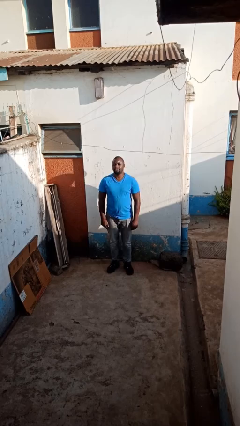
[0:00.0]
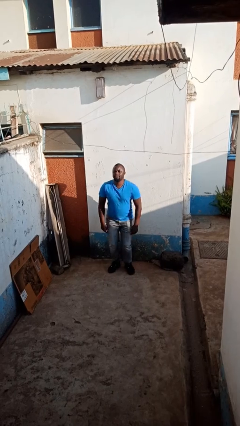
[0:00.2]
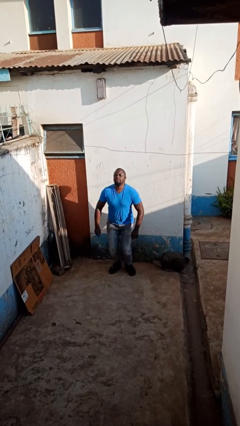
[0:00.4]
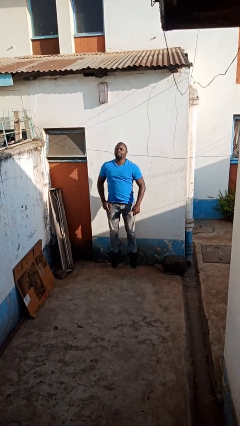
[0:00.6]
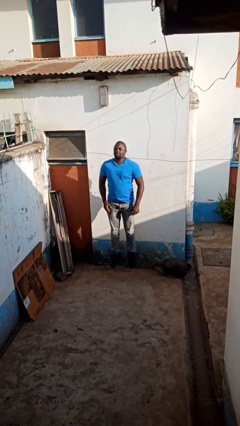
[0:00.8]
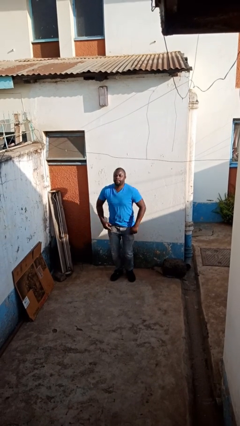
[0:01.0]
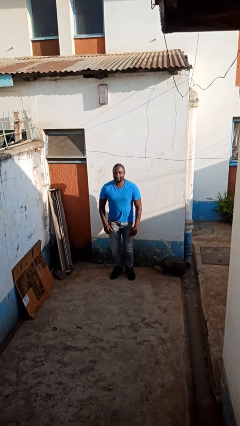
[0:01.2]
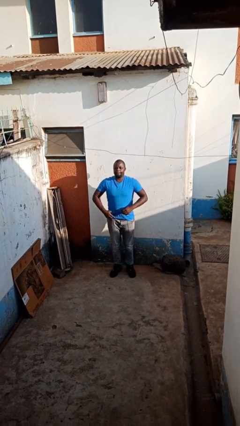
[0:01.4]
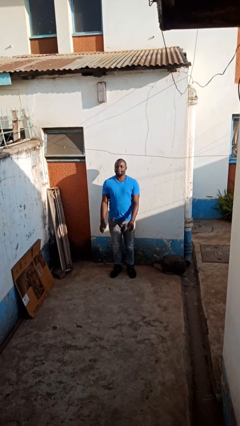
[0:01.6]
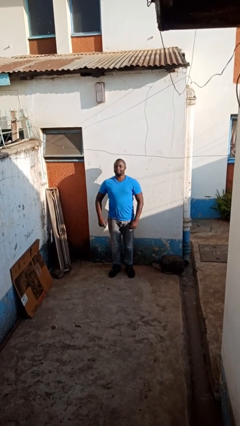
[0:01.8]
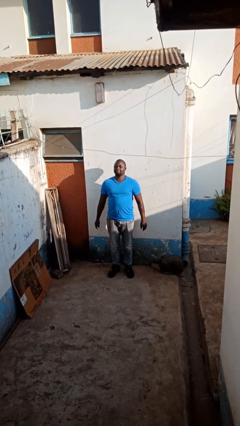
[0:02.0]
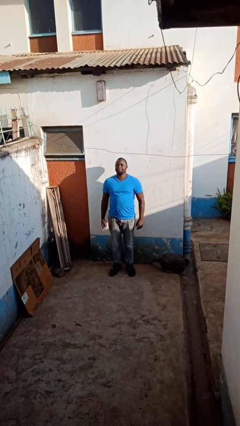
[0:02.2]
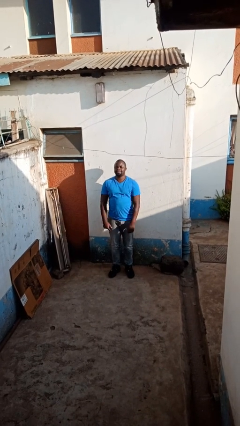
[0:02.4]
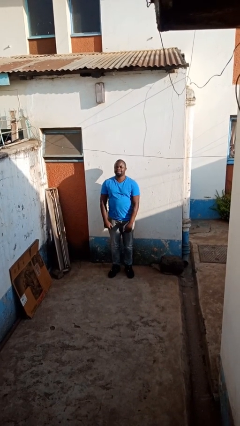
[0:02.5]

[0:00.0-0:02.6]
person jumps

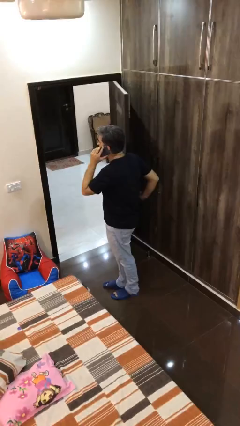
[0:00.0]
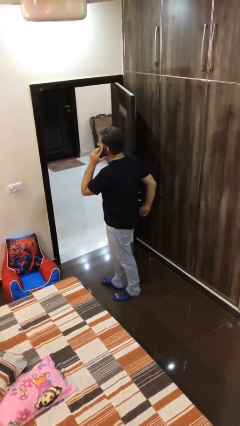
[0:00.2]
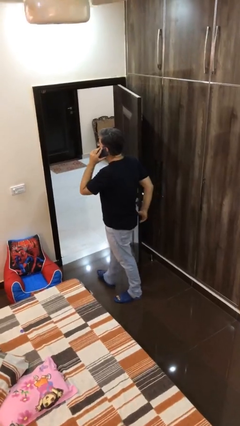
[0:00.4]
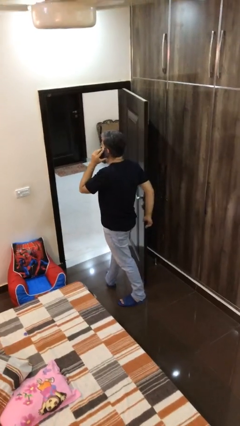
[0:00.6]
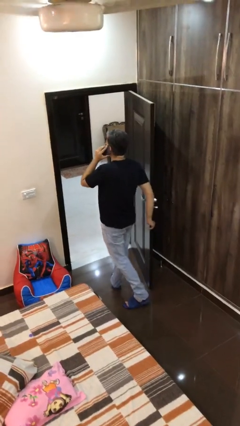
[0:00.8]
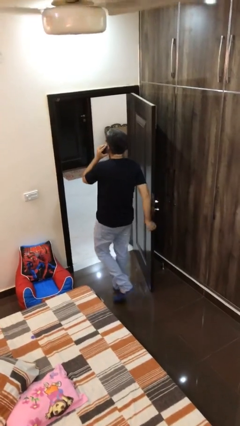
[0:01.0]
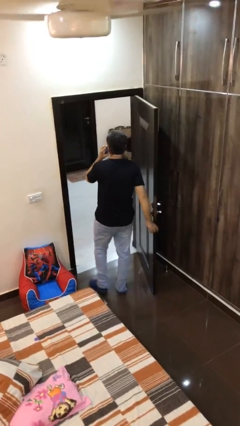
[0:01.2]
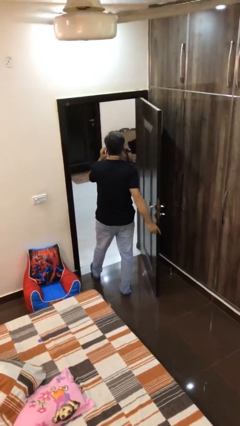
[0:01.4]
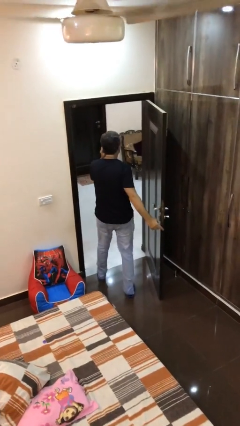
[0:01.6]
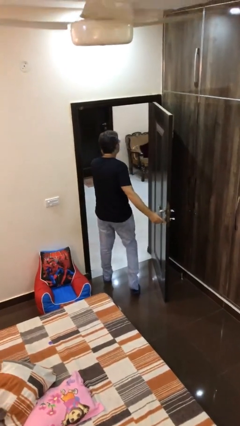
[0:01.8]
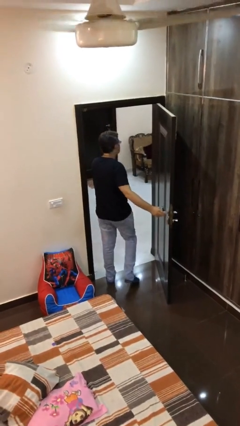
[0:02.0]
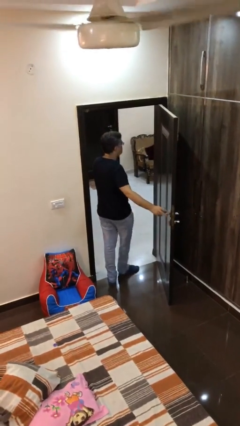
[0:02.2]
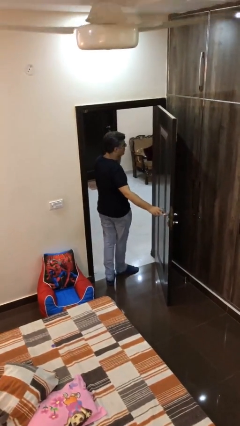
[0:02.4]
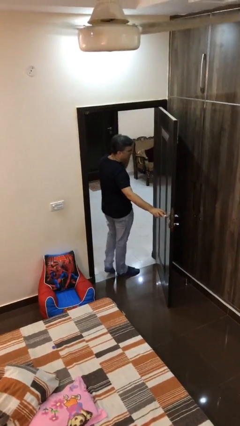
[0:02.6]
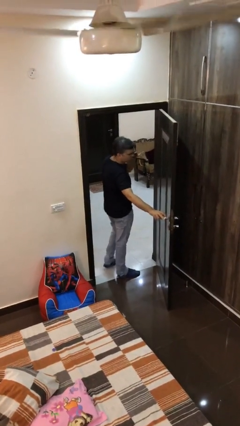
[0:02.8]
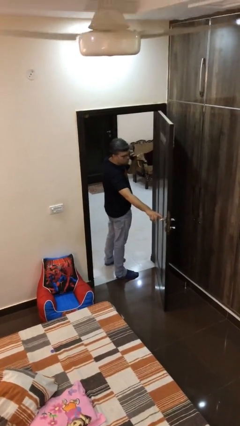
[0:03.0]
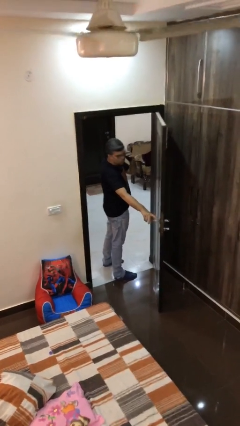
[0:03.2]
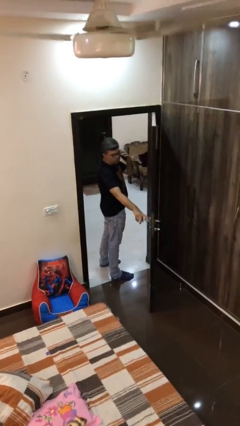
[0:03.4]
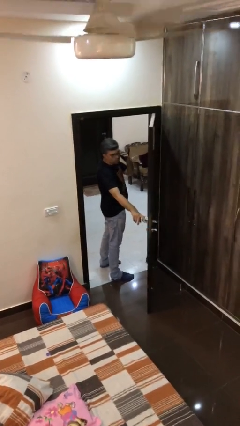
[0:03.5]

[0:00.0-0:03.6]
person exits scene through structure

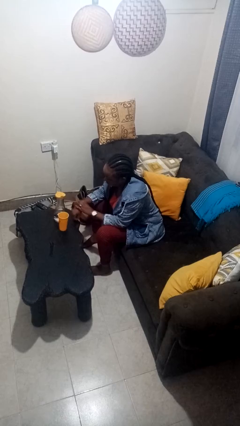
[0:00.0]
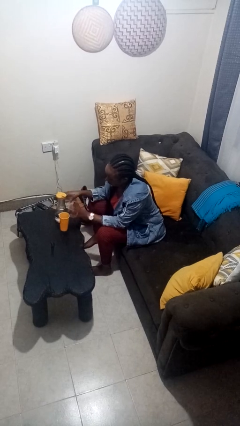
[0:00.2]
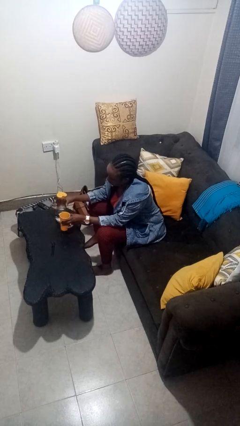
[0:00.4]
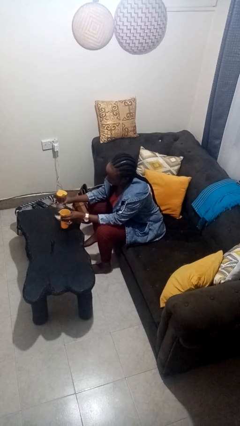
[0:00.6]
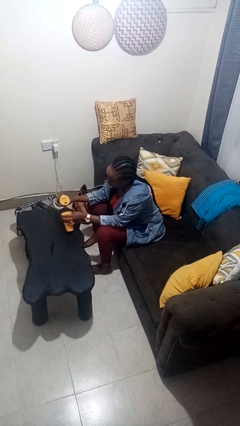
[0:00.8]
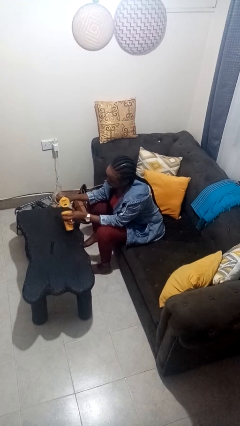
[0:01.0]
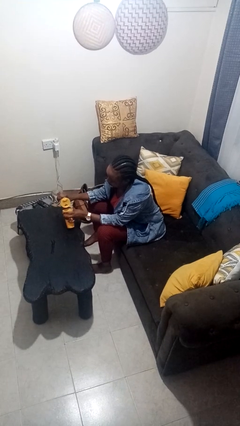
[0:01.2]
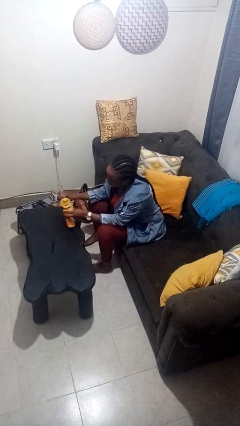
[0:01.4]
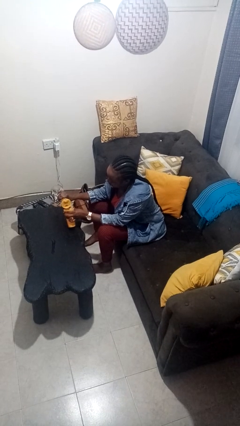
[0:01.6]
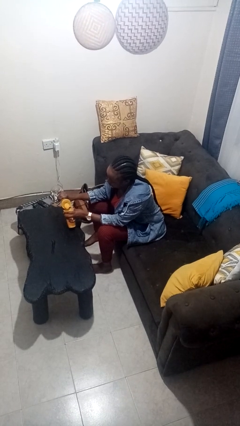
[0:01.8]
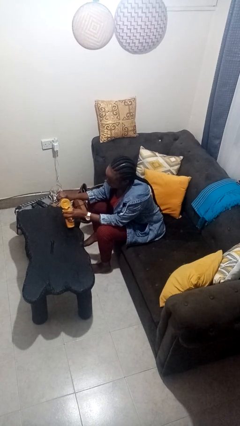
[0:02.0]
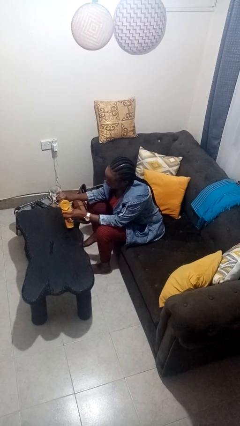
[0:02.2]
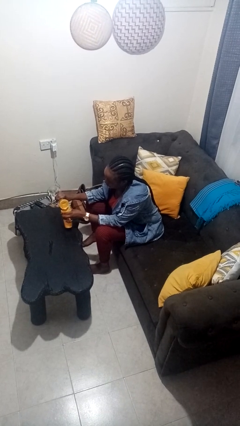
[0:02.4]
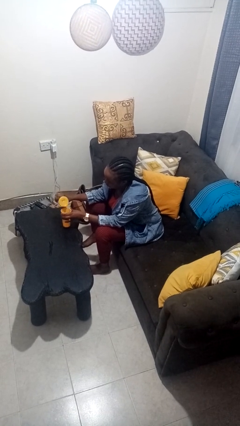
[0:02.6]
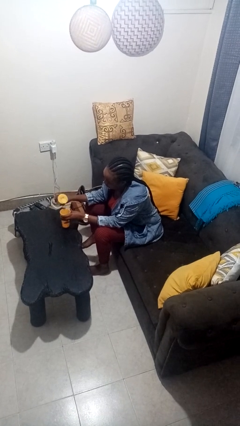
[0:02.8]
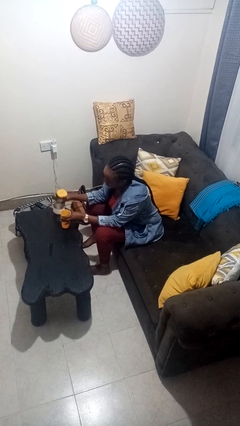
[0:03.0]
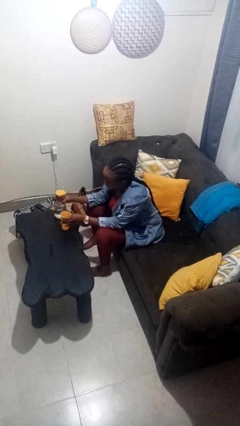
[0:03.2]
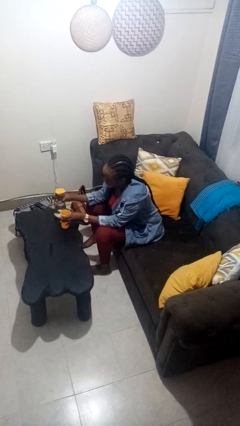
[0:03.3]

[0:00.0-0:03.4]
person pours liquid into cup

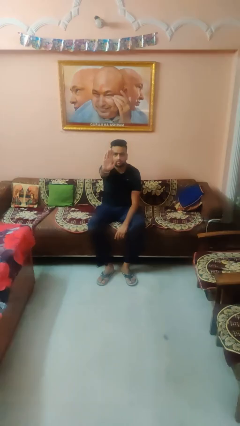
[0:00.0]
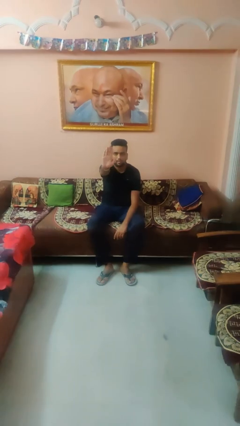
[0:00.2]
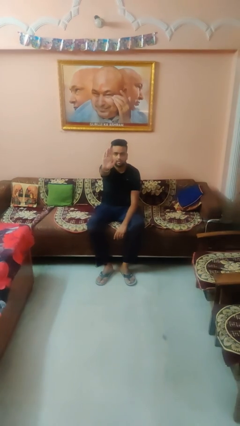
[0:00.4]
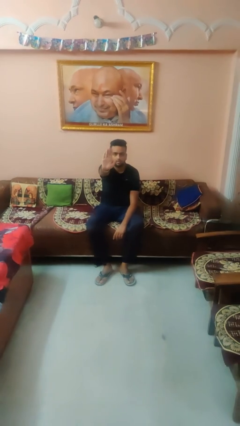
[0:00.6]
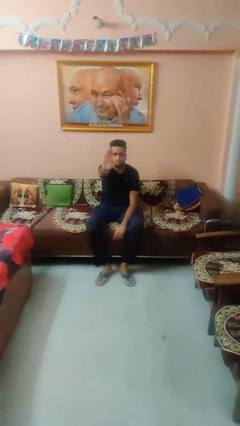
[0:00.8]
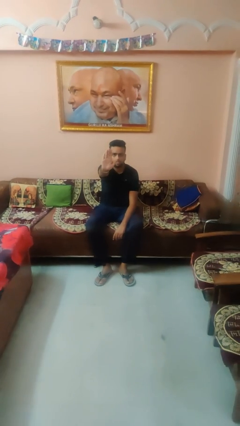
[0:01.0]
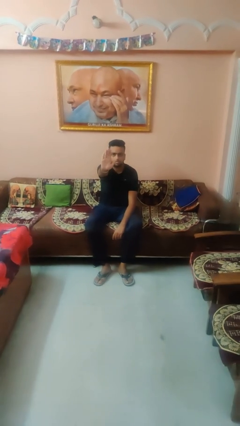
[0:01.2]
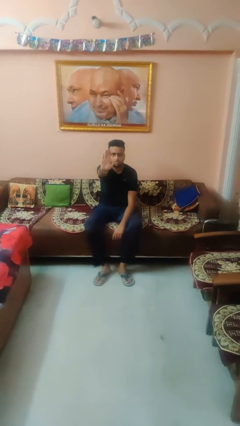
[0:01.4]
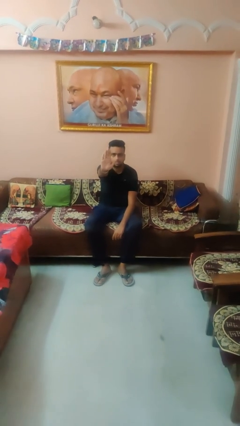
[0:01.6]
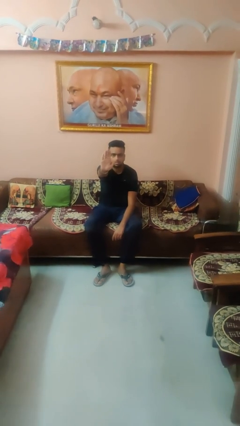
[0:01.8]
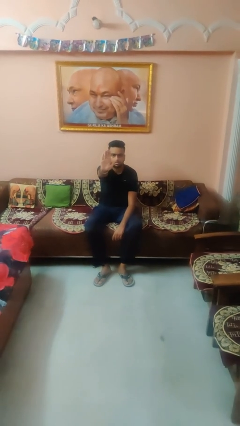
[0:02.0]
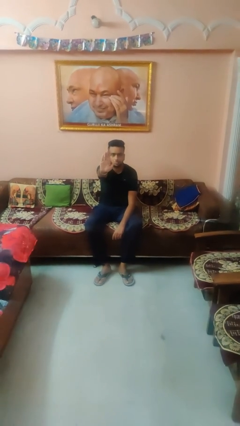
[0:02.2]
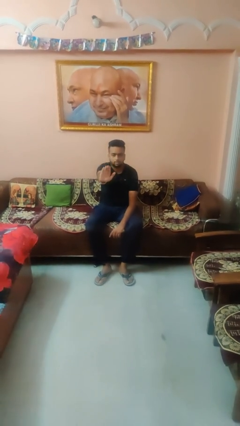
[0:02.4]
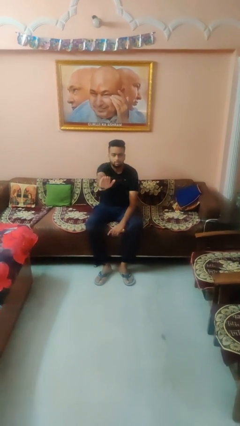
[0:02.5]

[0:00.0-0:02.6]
person gestures stop

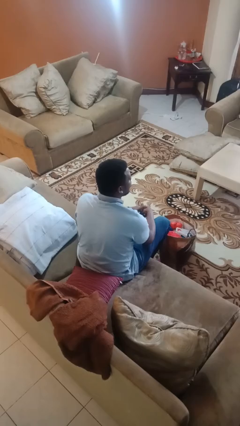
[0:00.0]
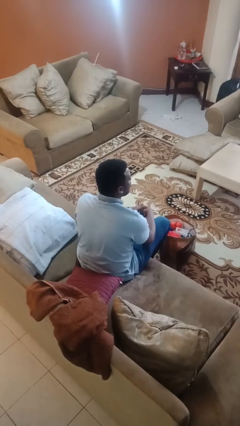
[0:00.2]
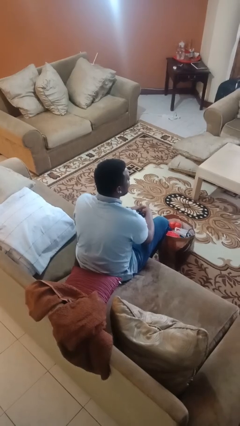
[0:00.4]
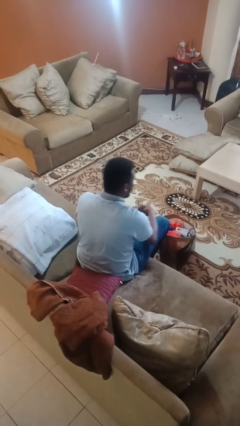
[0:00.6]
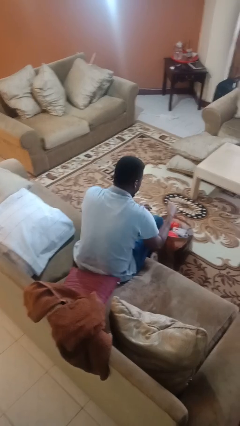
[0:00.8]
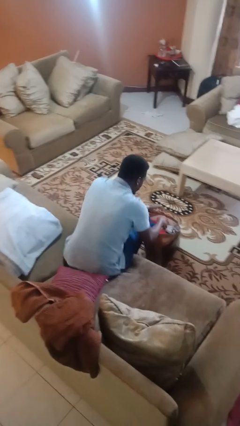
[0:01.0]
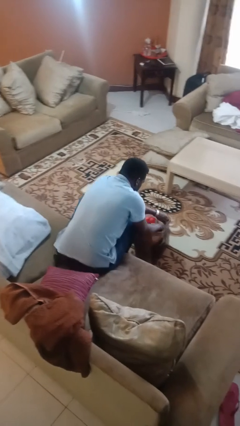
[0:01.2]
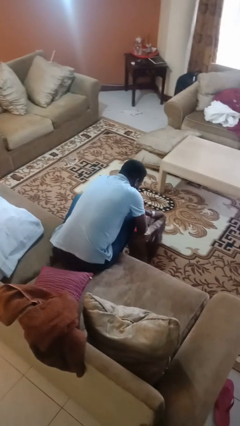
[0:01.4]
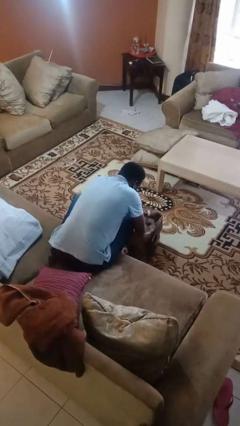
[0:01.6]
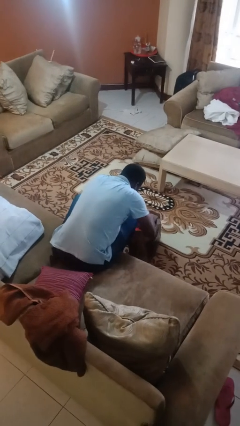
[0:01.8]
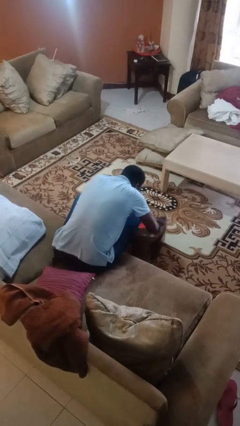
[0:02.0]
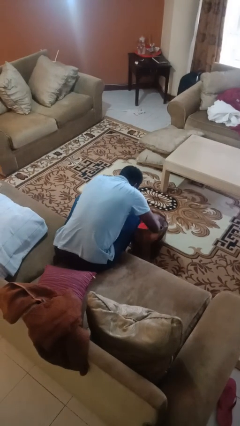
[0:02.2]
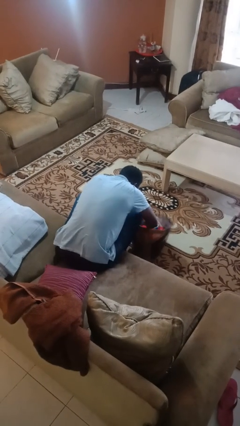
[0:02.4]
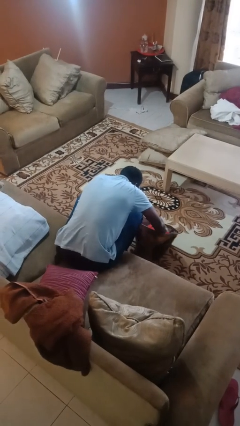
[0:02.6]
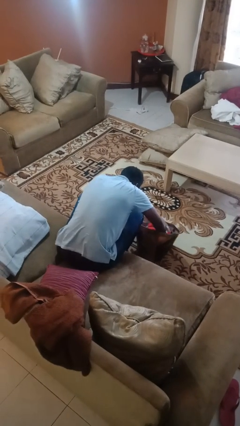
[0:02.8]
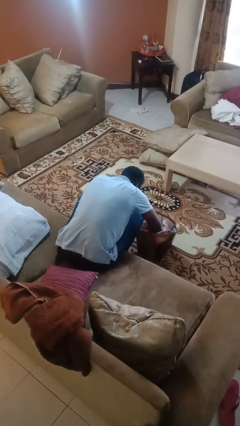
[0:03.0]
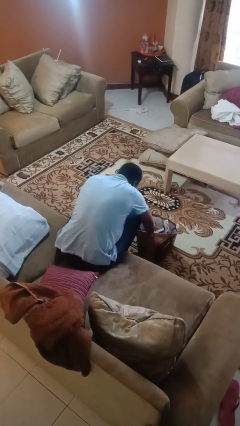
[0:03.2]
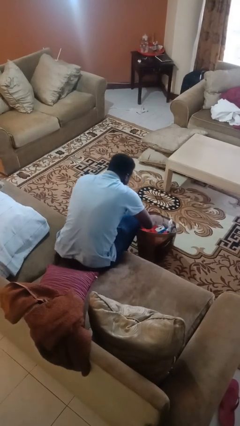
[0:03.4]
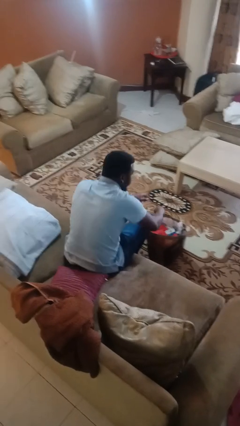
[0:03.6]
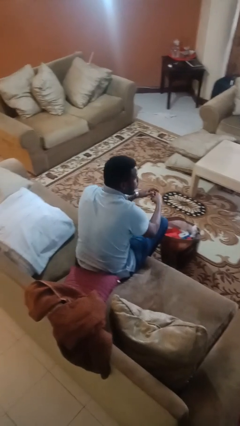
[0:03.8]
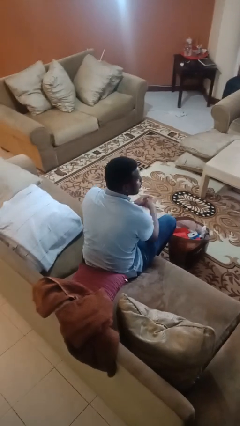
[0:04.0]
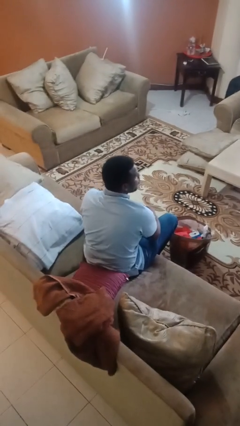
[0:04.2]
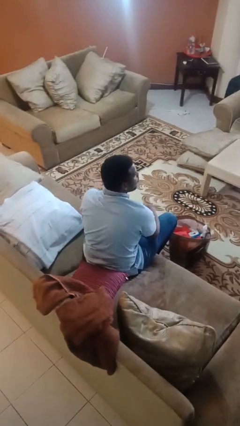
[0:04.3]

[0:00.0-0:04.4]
person searches in bag

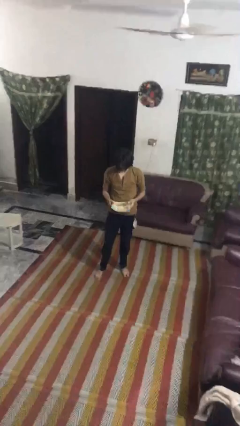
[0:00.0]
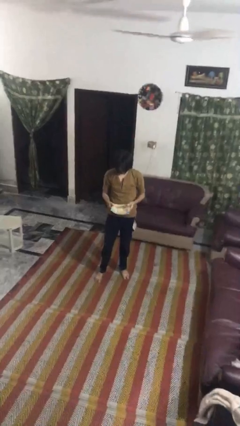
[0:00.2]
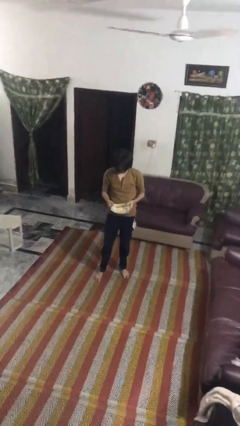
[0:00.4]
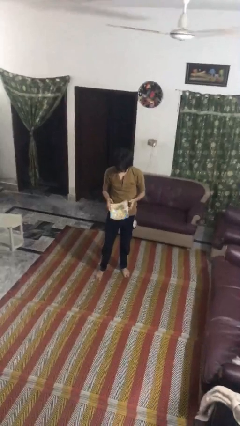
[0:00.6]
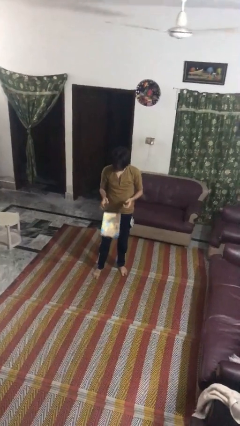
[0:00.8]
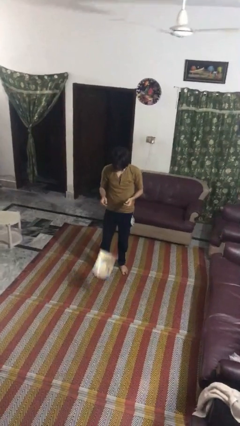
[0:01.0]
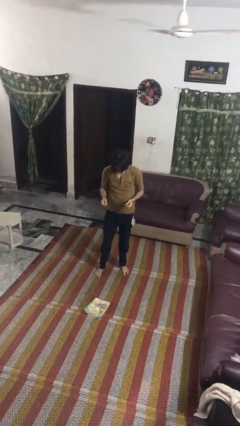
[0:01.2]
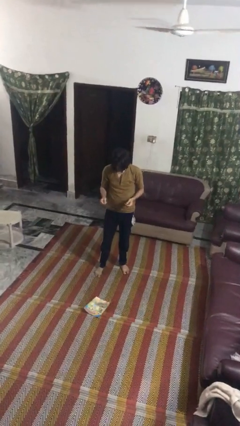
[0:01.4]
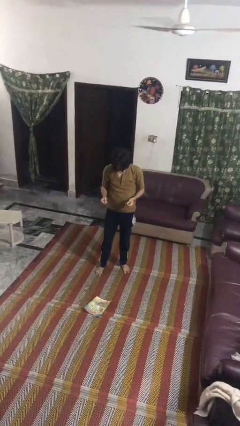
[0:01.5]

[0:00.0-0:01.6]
person drops object
